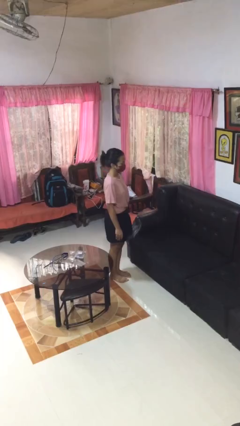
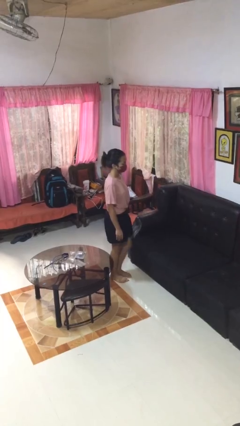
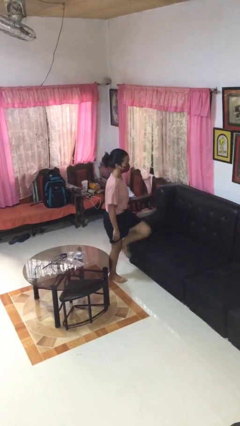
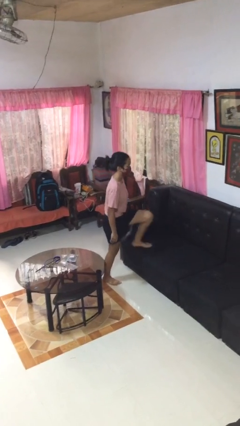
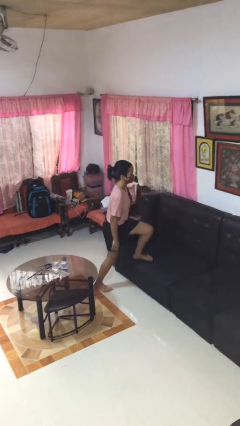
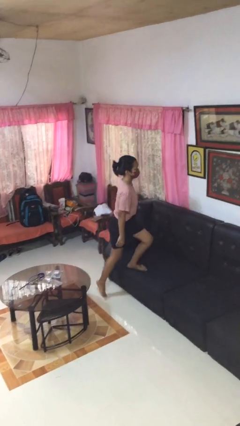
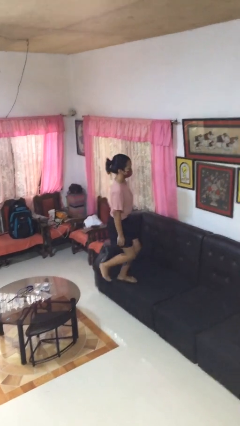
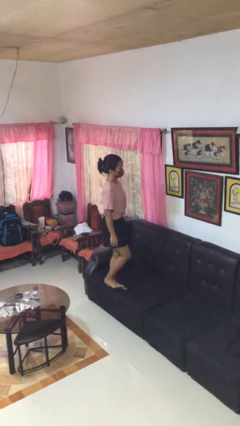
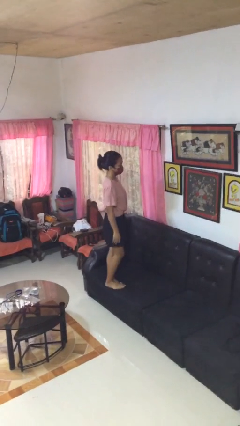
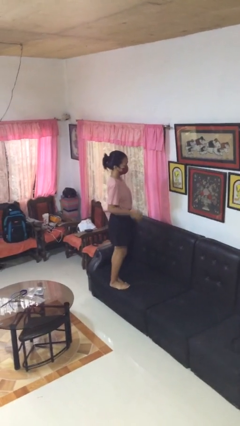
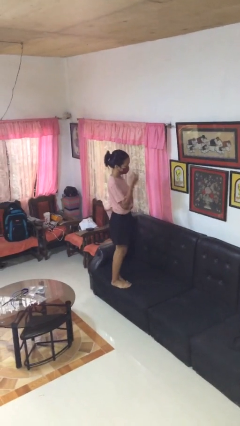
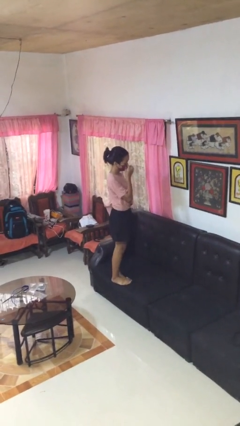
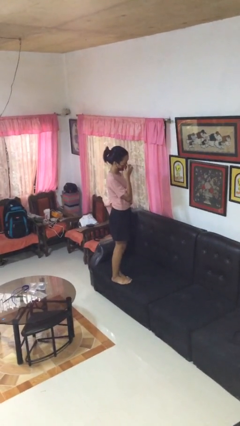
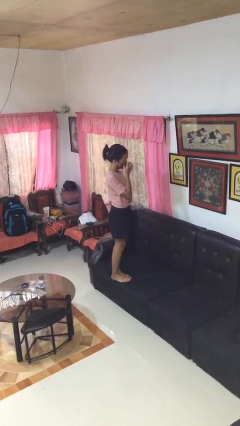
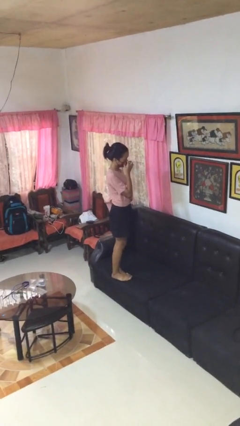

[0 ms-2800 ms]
person climbs on couch

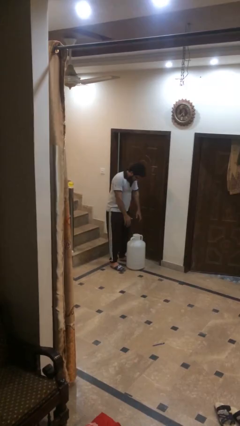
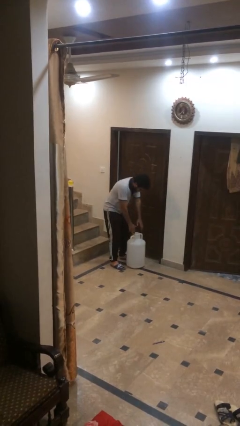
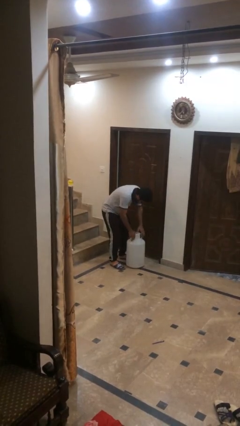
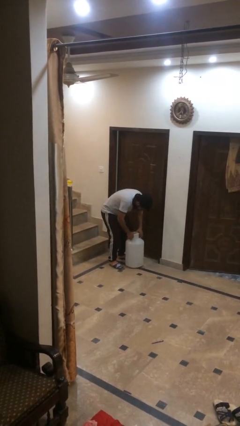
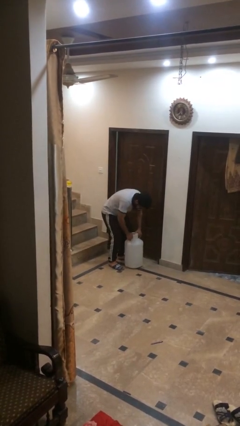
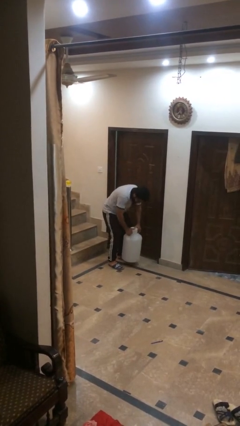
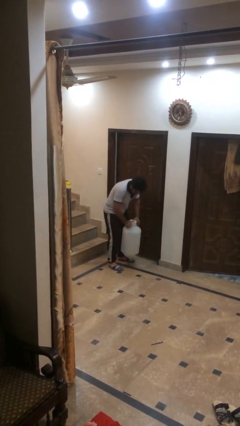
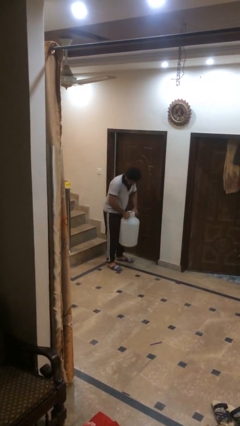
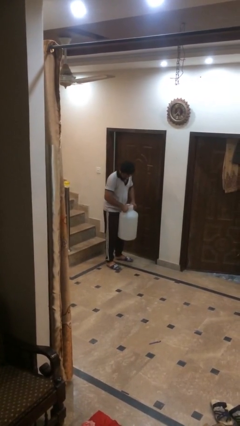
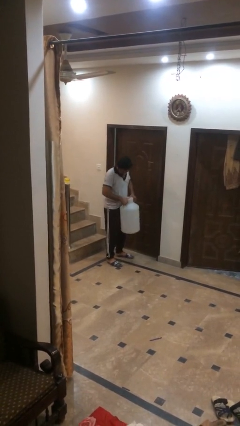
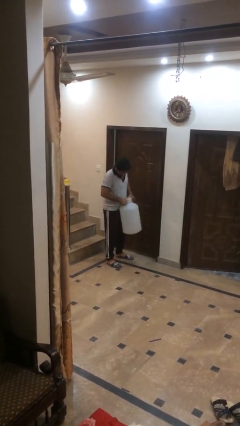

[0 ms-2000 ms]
person picks up object from floor

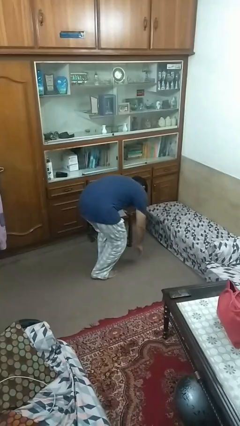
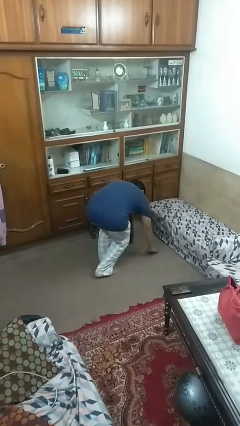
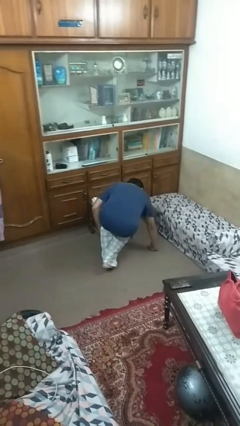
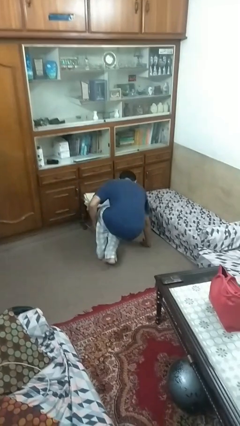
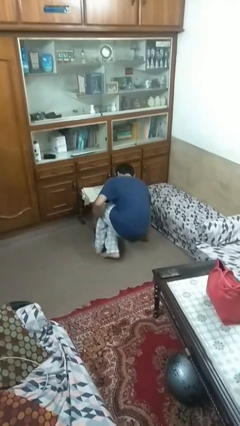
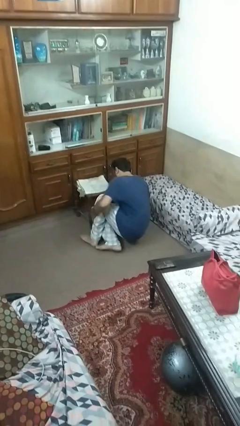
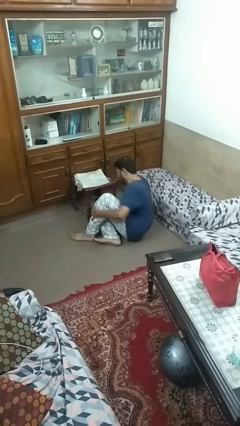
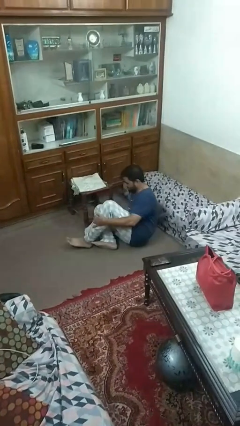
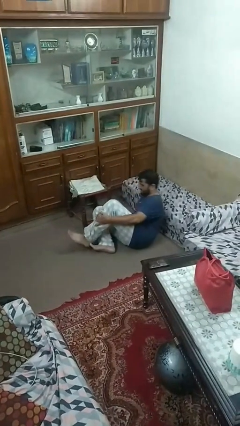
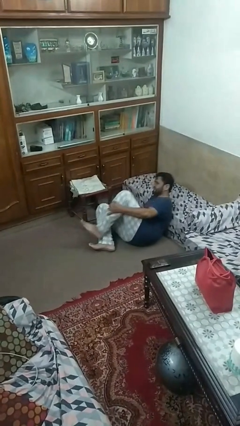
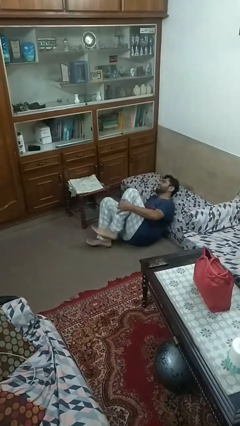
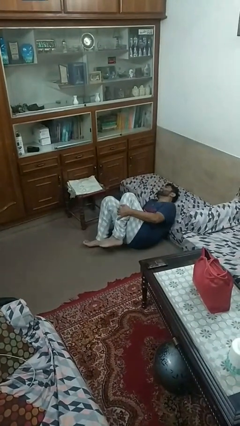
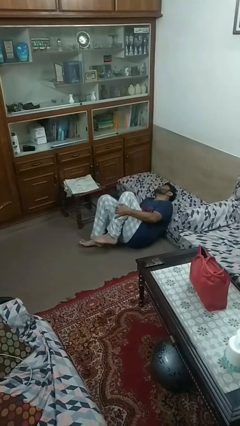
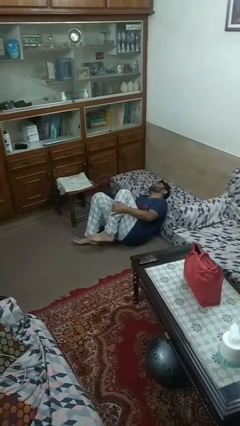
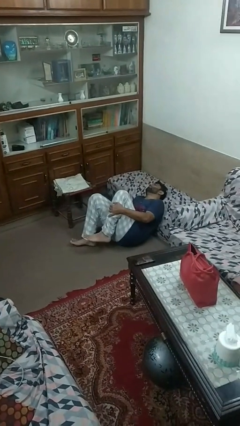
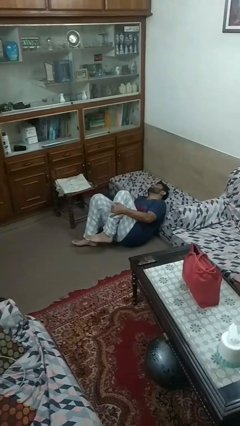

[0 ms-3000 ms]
person lies down on floor

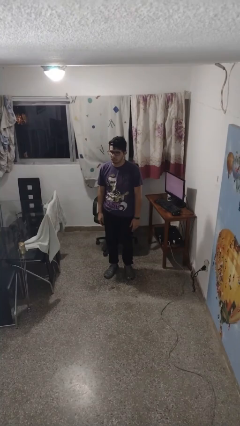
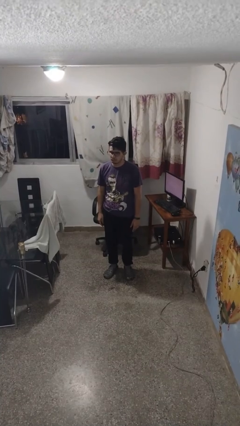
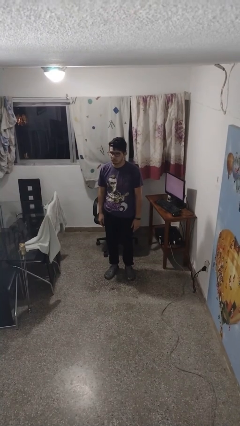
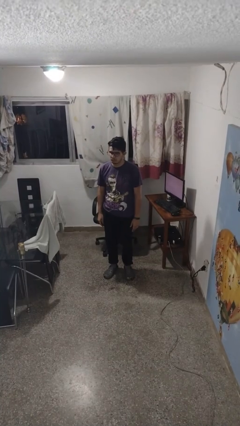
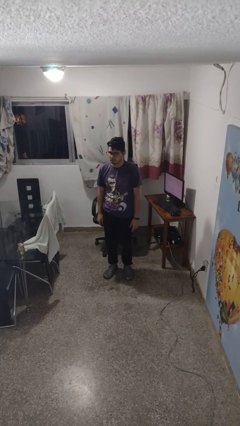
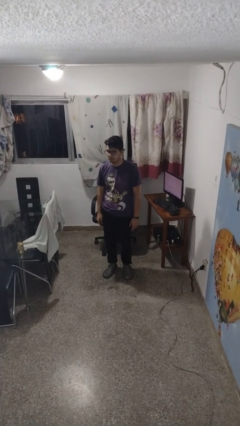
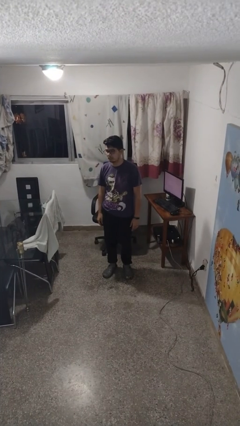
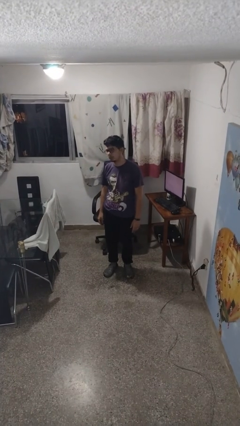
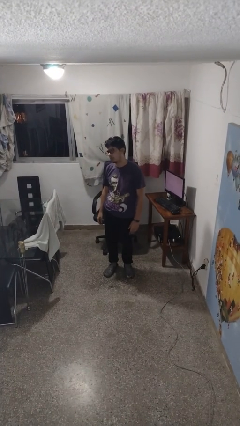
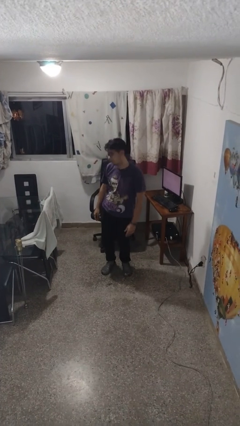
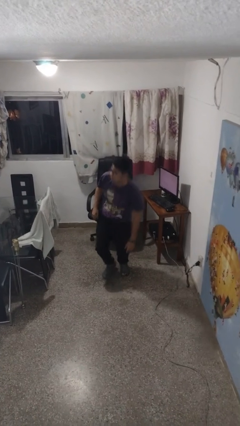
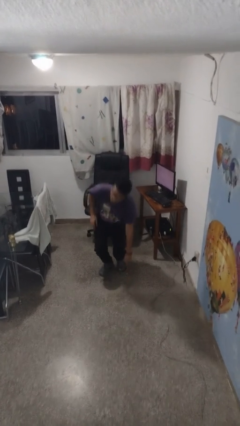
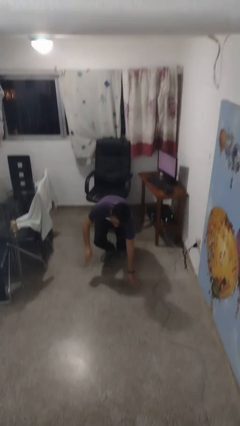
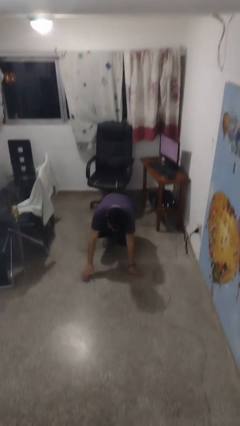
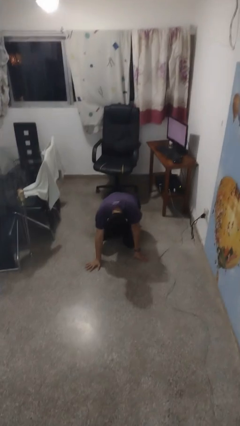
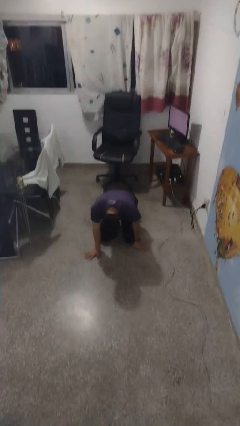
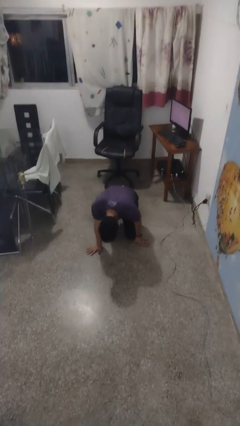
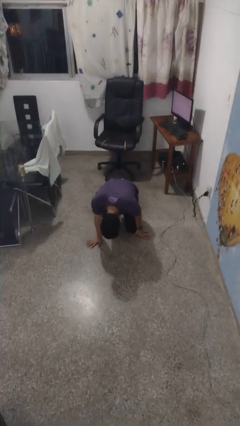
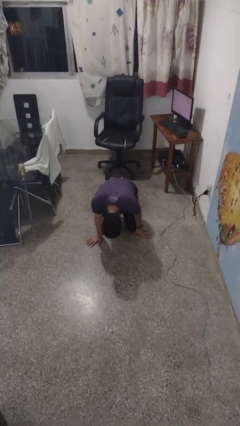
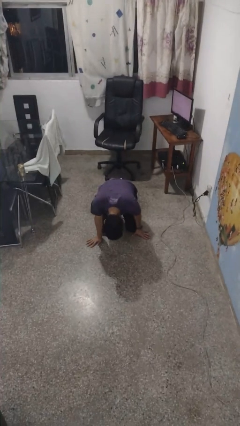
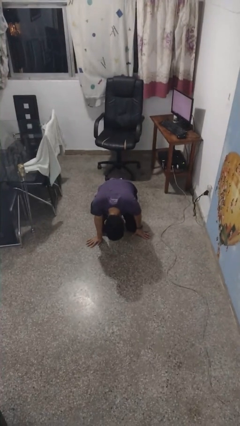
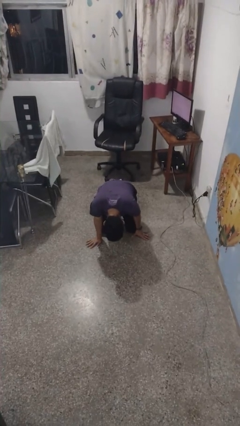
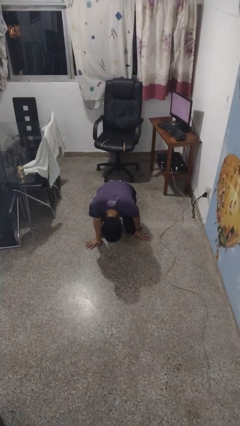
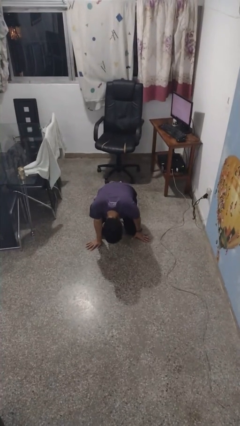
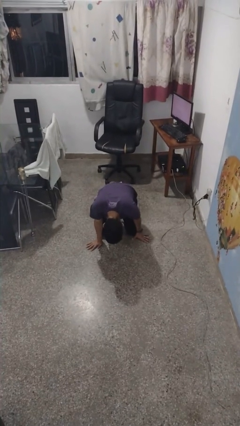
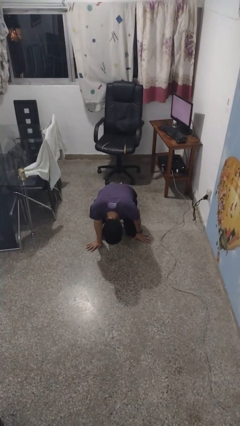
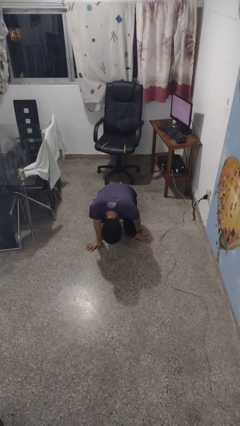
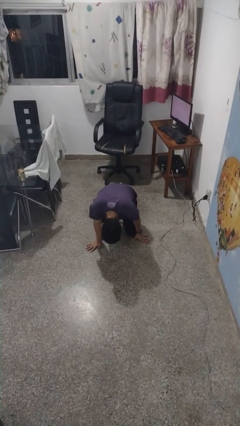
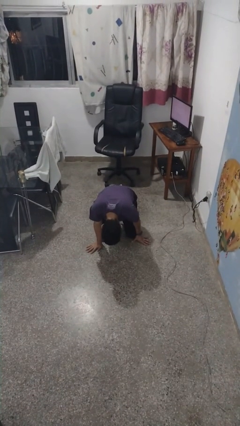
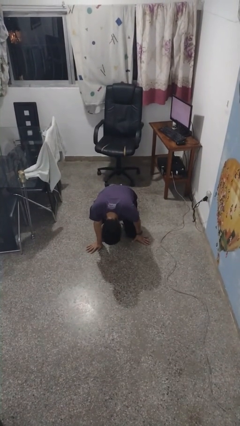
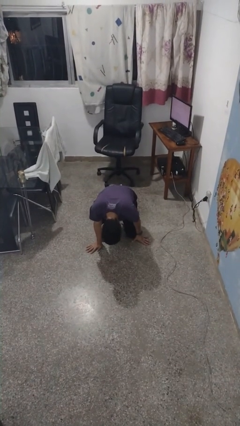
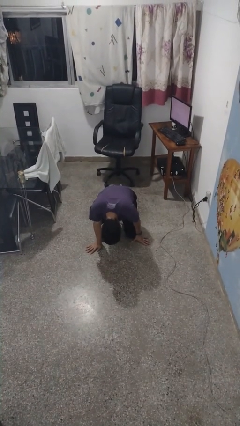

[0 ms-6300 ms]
person falls while standing

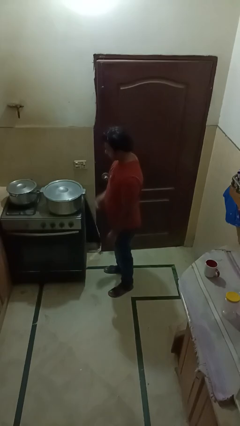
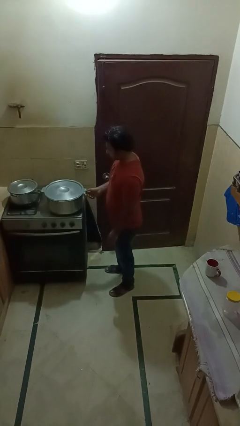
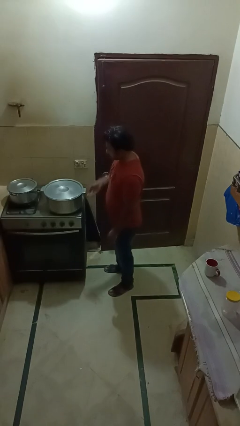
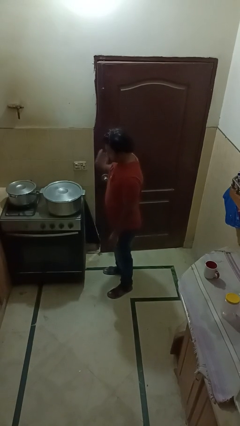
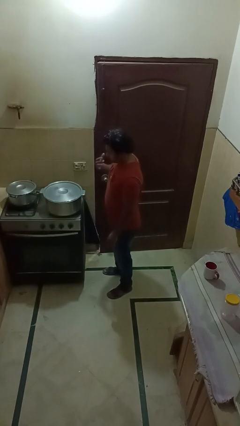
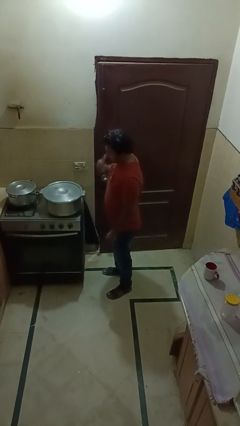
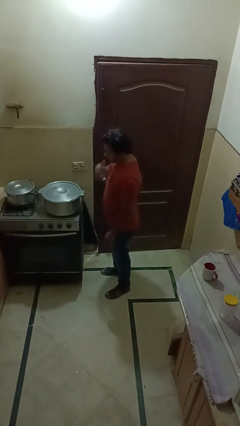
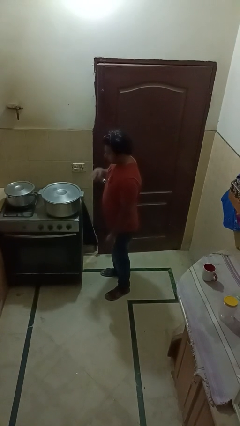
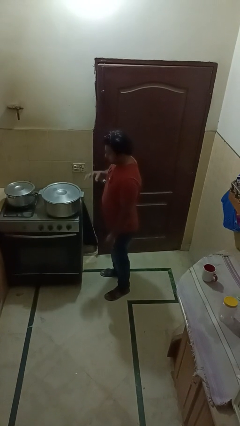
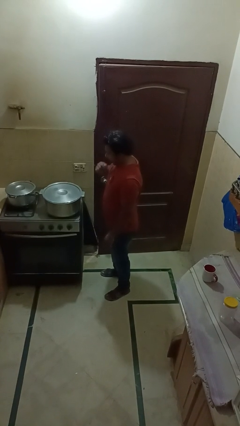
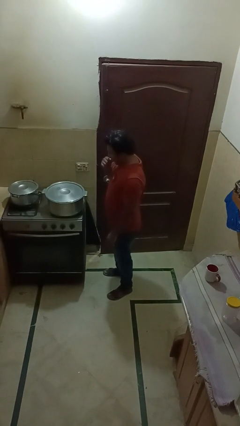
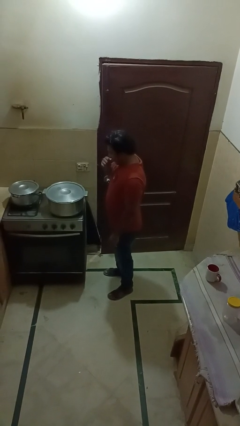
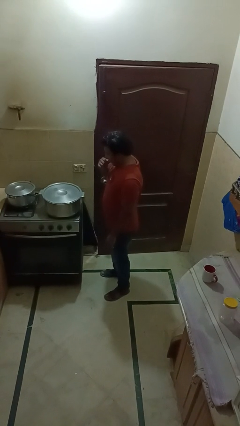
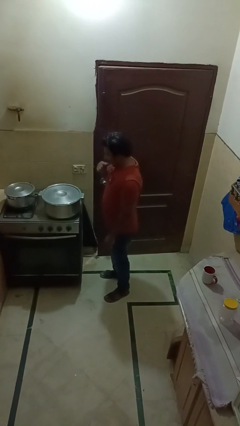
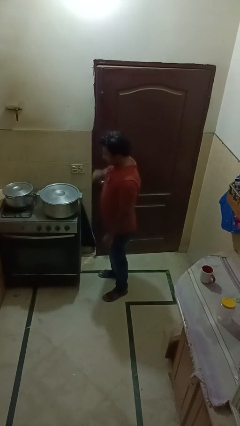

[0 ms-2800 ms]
person burns hand

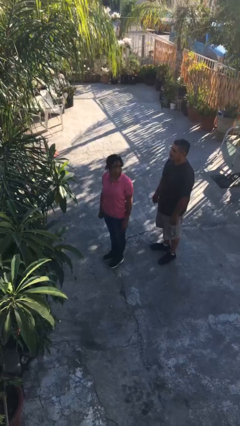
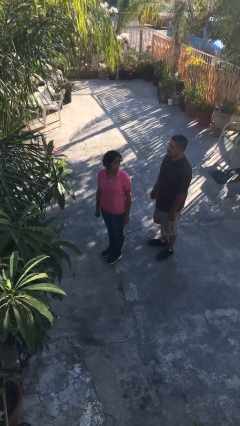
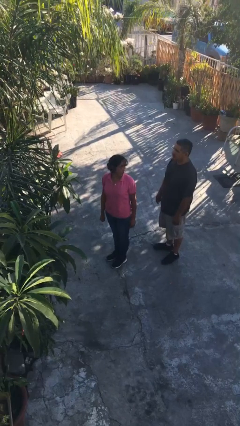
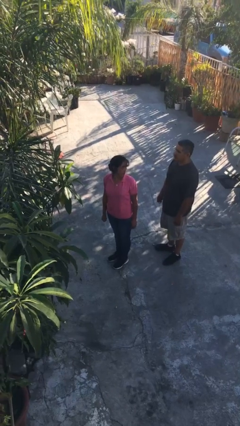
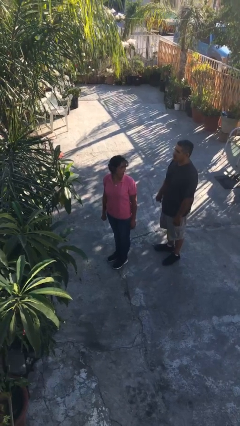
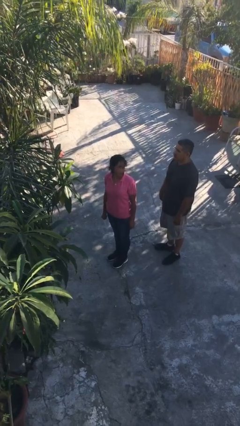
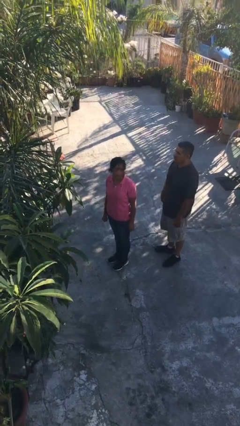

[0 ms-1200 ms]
person looks over shoulder
